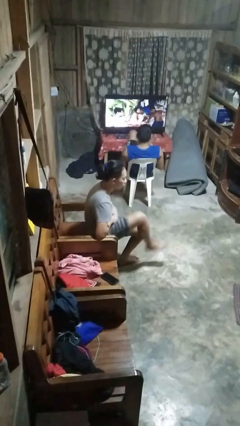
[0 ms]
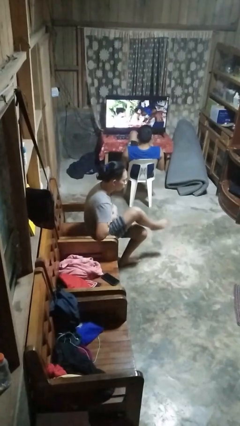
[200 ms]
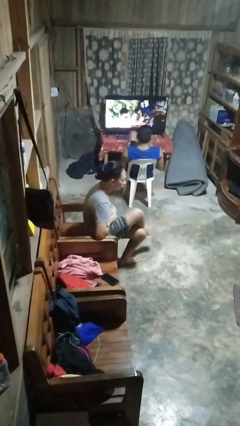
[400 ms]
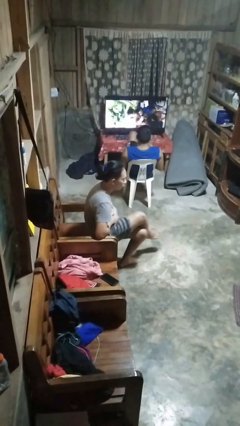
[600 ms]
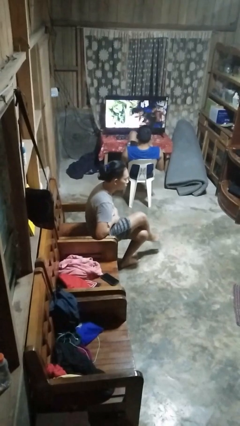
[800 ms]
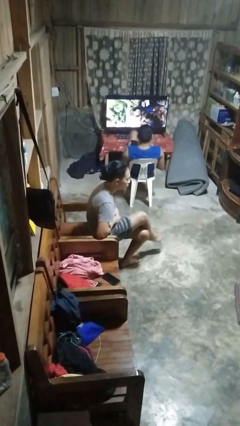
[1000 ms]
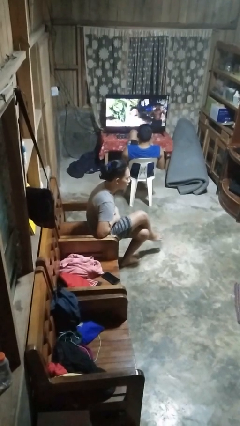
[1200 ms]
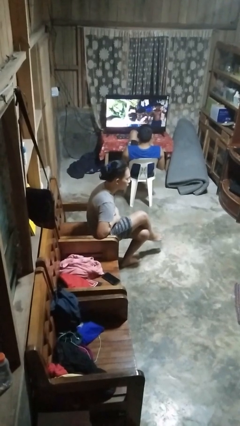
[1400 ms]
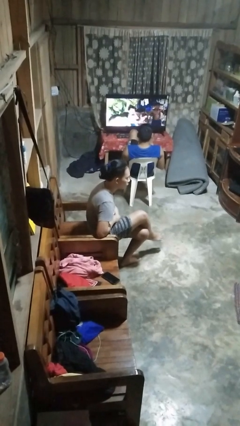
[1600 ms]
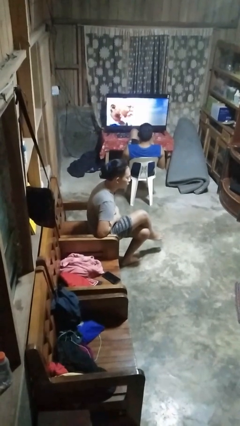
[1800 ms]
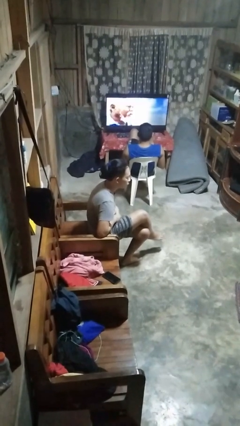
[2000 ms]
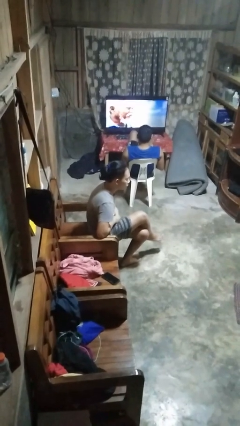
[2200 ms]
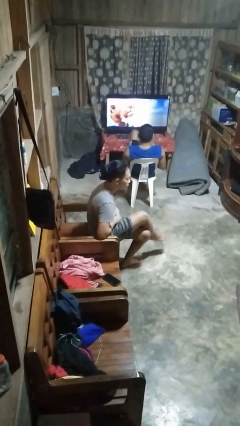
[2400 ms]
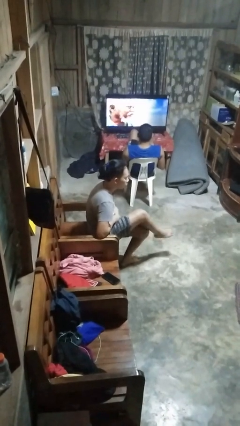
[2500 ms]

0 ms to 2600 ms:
person crosses legs

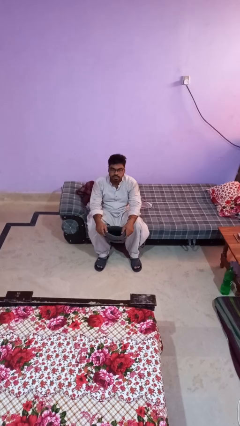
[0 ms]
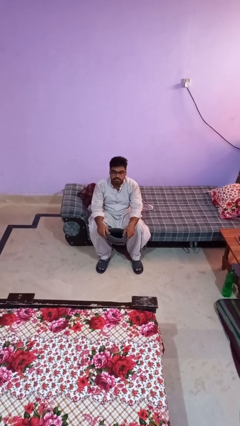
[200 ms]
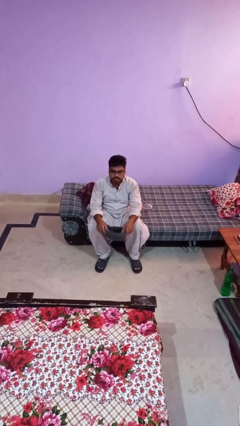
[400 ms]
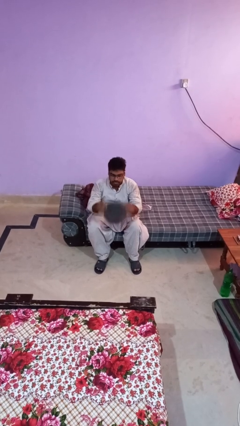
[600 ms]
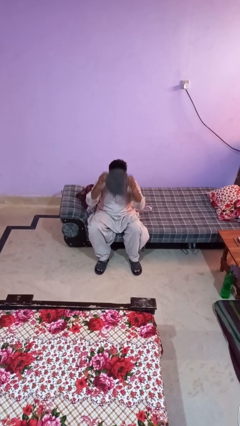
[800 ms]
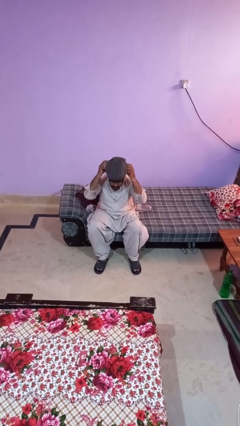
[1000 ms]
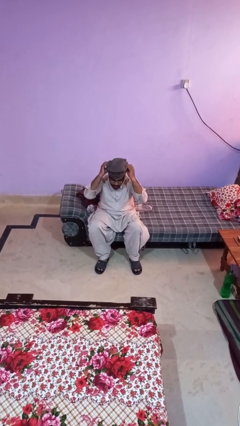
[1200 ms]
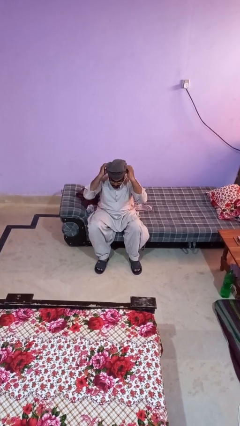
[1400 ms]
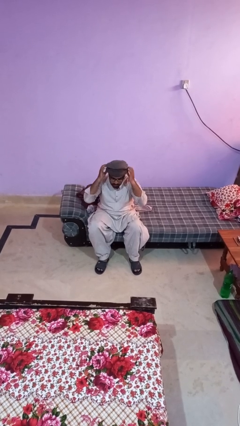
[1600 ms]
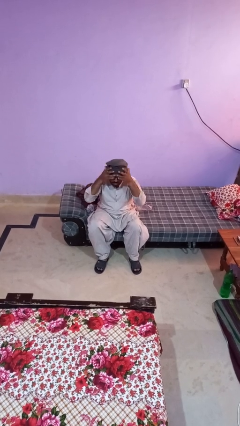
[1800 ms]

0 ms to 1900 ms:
person puts on hat

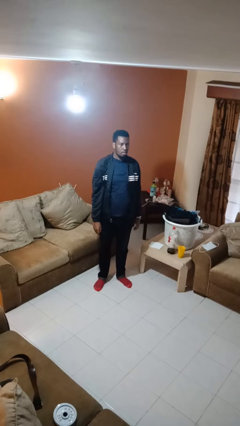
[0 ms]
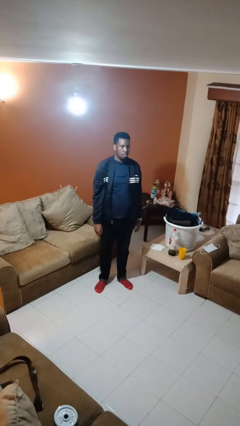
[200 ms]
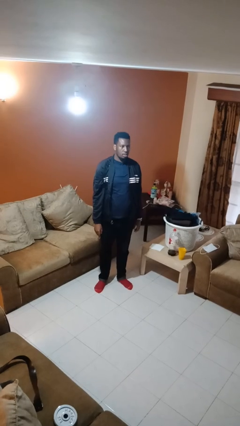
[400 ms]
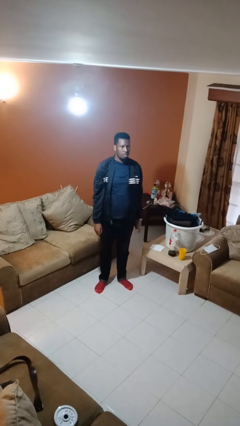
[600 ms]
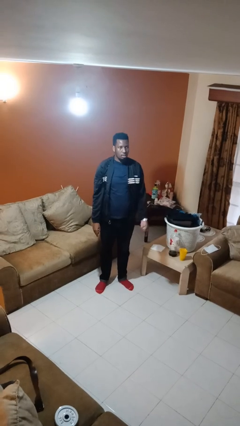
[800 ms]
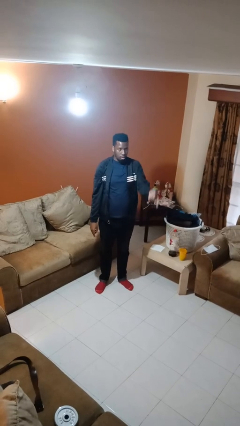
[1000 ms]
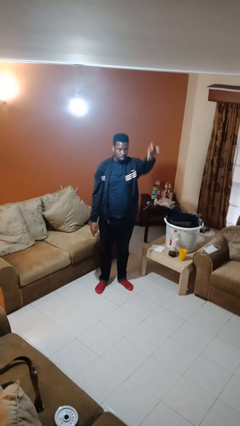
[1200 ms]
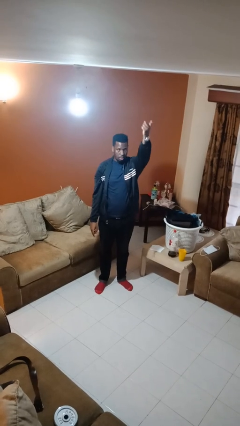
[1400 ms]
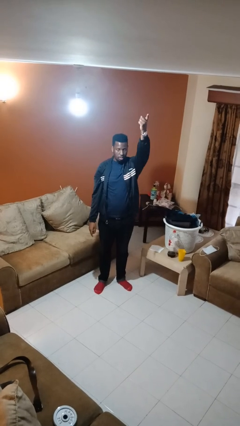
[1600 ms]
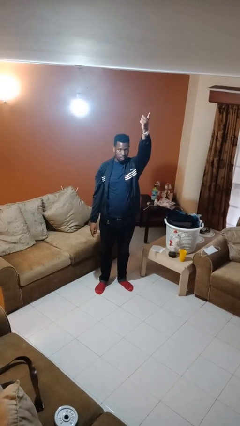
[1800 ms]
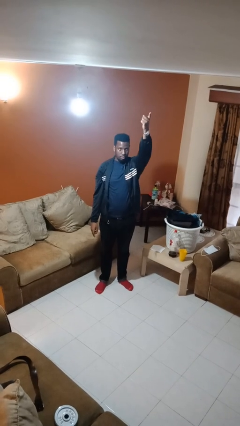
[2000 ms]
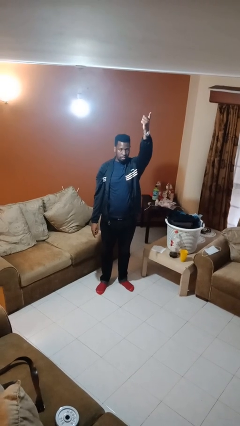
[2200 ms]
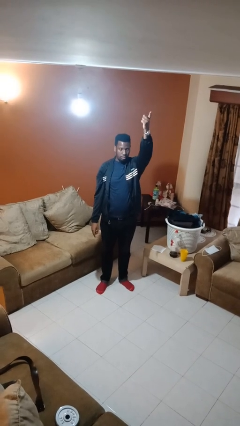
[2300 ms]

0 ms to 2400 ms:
person gestures swipe up

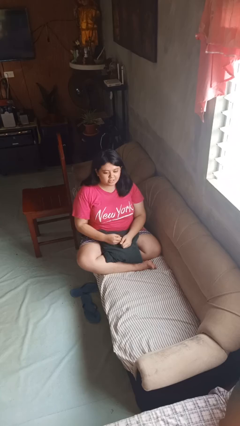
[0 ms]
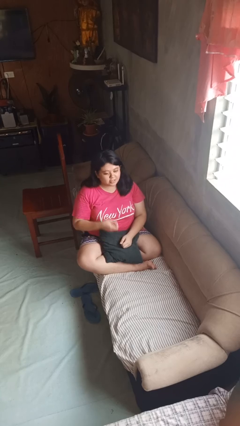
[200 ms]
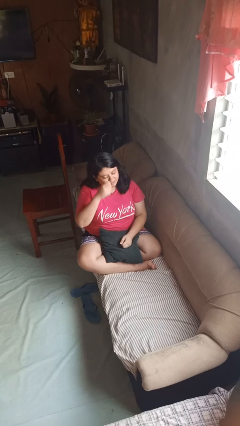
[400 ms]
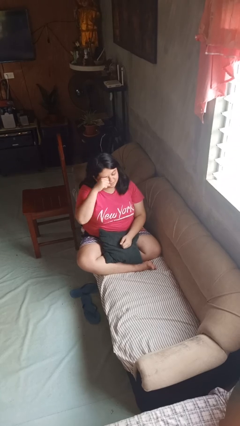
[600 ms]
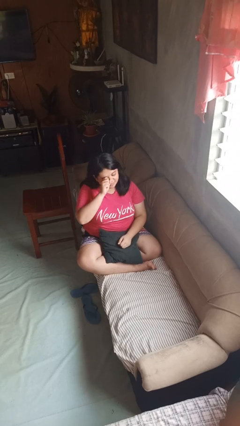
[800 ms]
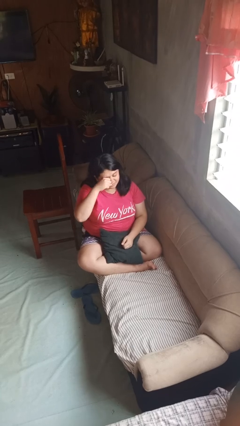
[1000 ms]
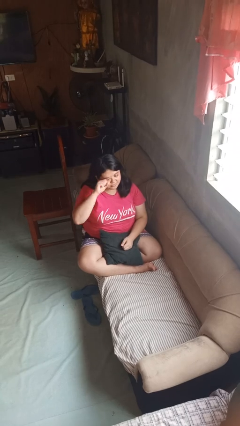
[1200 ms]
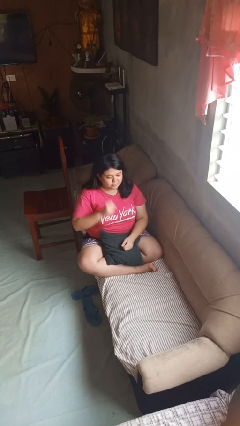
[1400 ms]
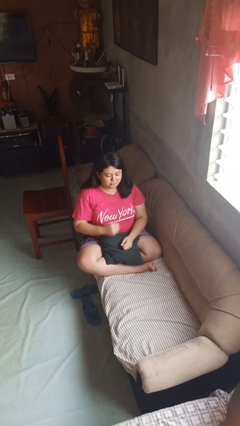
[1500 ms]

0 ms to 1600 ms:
person rubs eyes

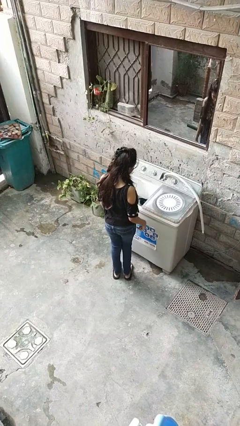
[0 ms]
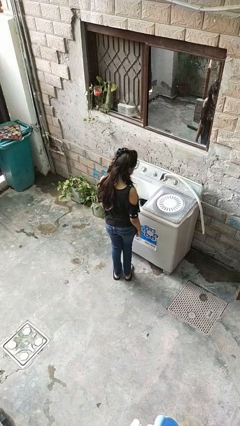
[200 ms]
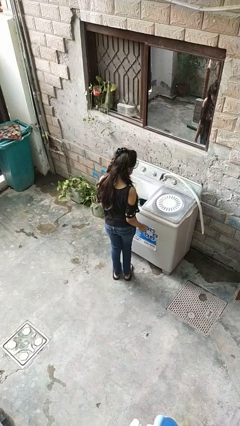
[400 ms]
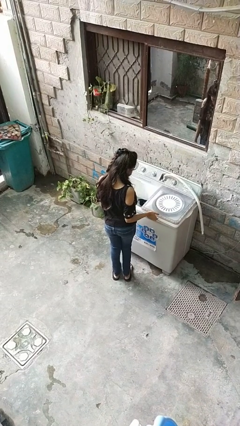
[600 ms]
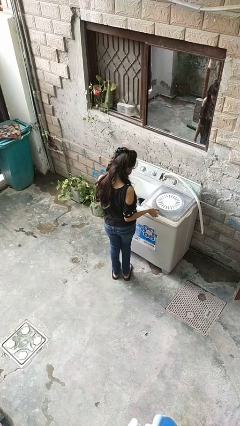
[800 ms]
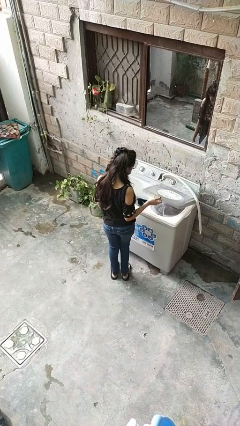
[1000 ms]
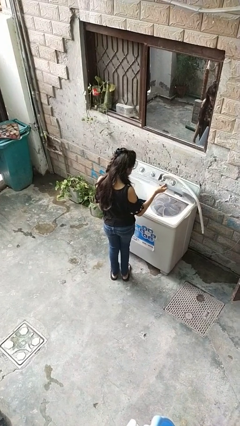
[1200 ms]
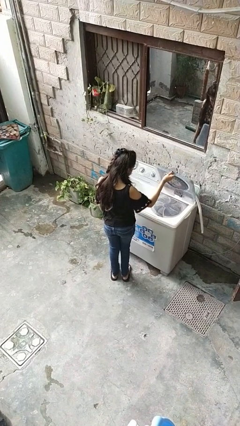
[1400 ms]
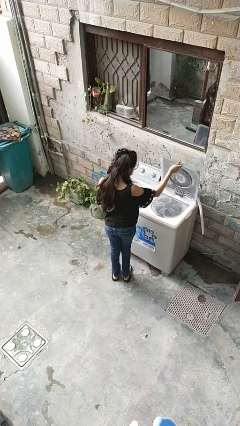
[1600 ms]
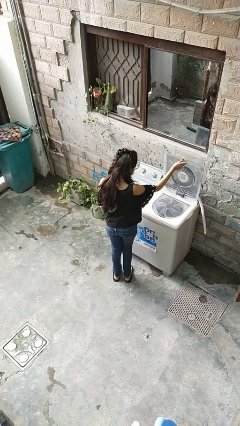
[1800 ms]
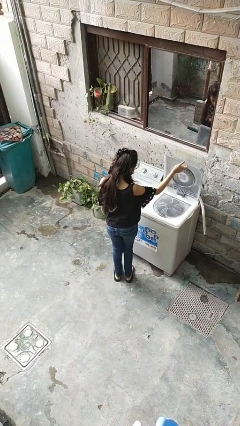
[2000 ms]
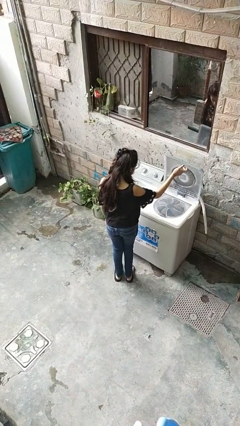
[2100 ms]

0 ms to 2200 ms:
person opens clothes washer

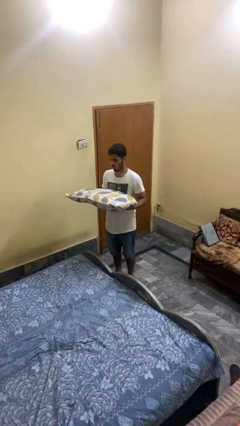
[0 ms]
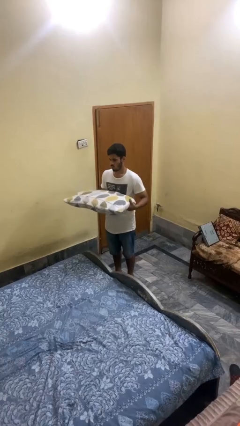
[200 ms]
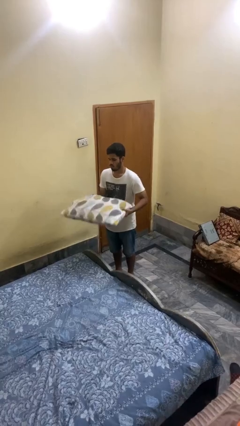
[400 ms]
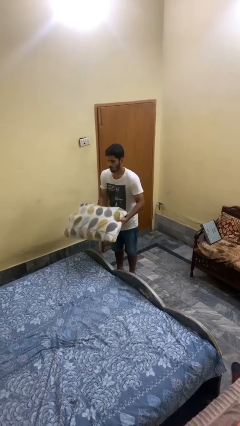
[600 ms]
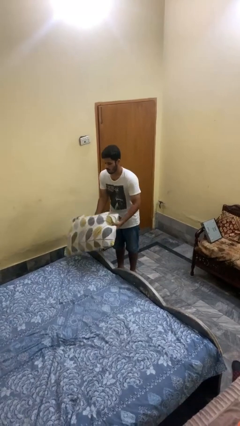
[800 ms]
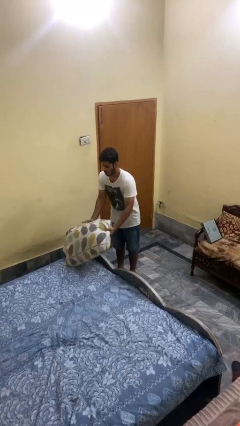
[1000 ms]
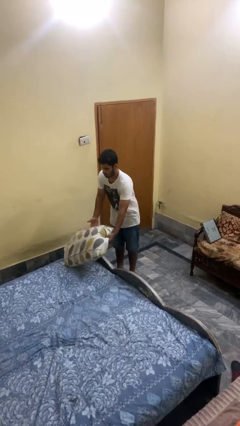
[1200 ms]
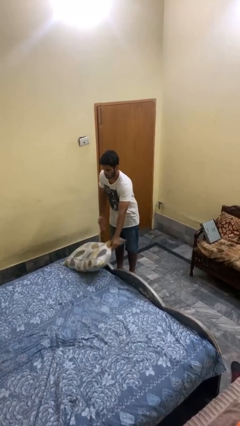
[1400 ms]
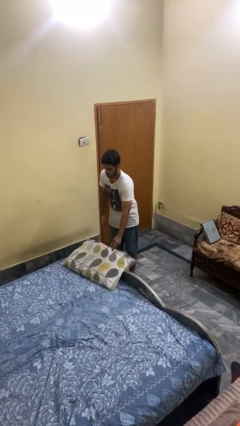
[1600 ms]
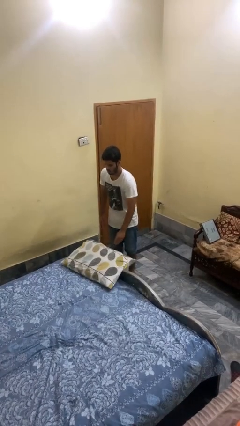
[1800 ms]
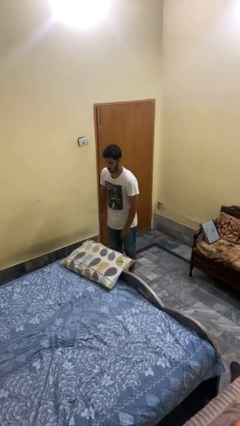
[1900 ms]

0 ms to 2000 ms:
person puts down object on bed

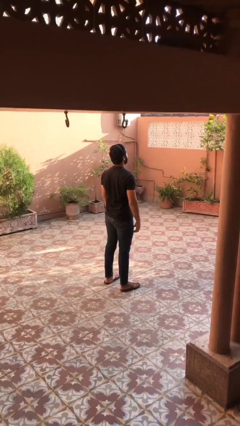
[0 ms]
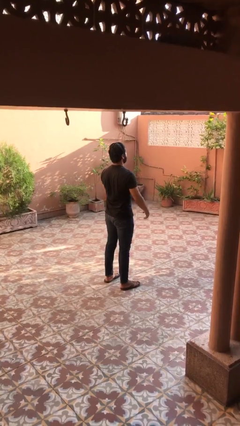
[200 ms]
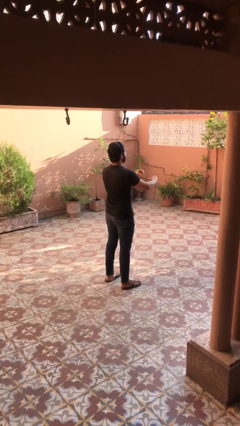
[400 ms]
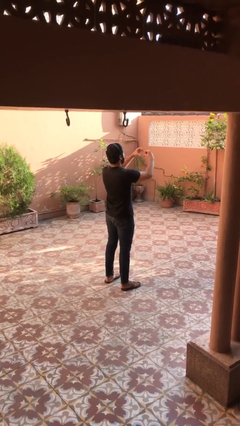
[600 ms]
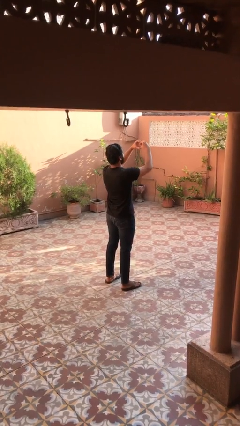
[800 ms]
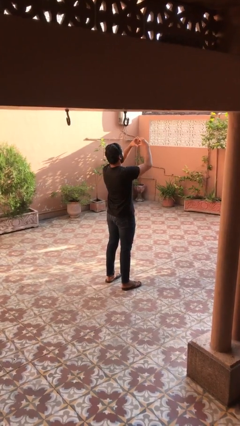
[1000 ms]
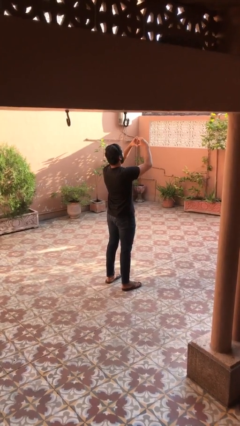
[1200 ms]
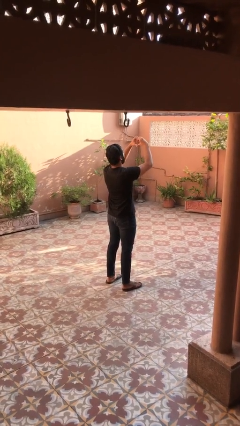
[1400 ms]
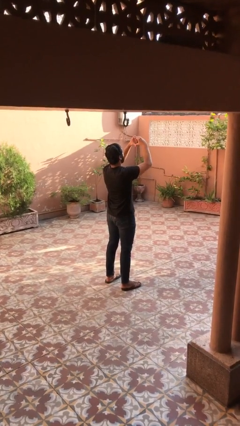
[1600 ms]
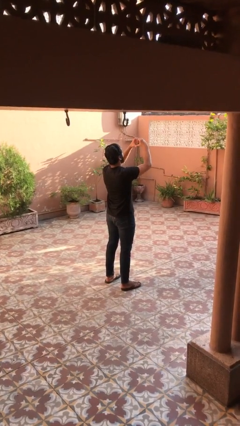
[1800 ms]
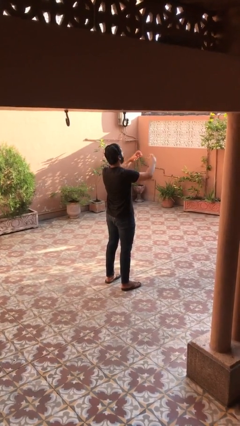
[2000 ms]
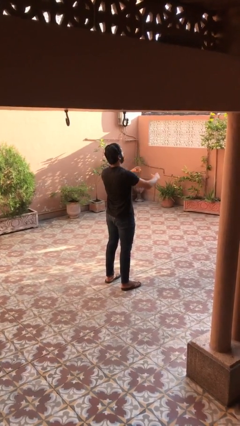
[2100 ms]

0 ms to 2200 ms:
person gestures heart

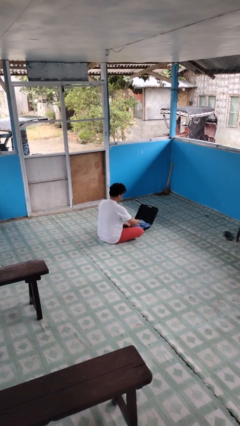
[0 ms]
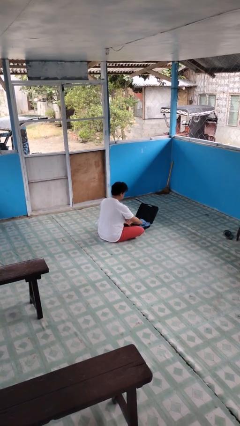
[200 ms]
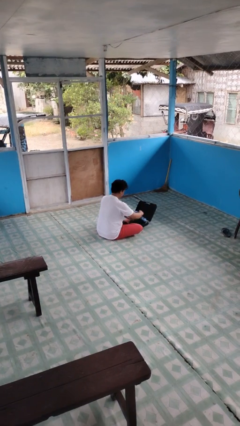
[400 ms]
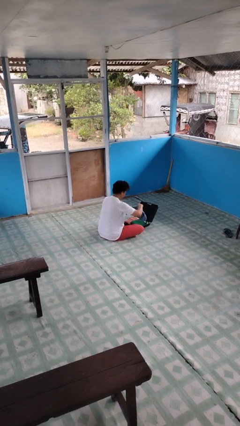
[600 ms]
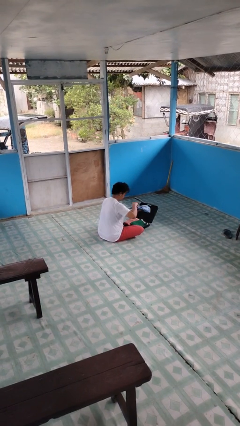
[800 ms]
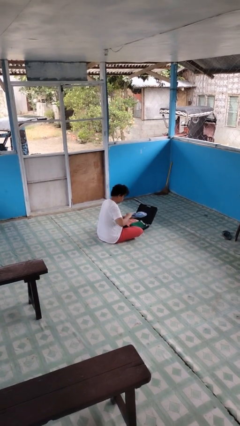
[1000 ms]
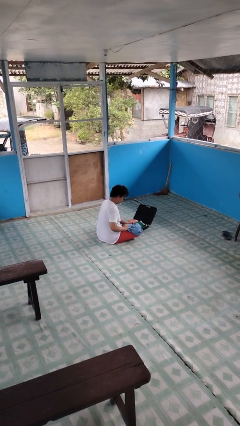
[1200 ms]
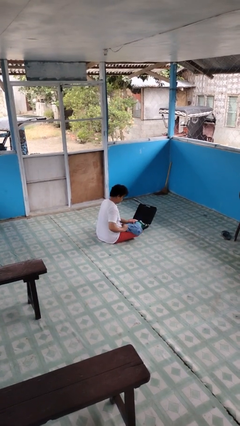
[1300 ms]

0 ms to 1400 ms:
person unloads clothes from suitcase

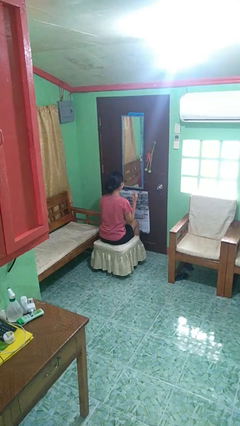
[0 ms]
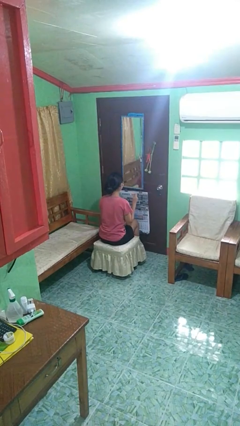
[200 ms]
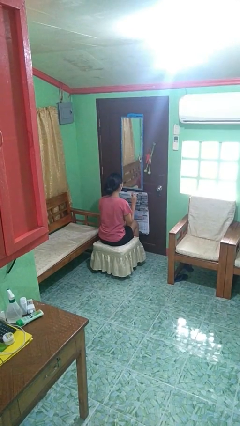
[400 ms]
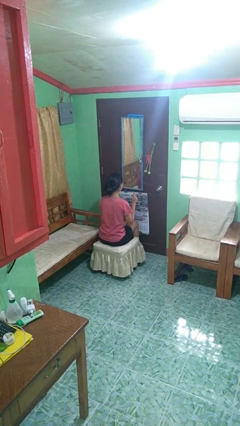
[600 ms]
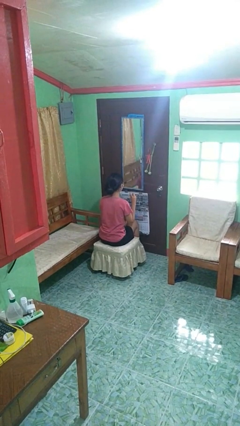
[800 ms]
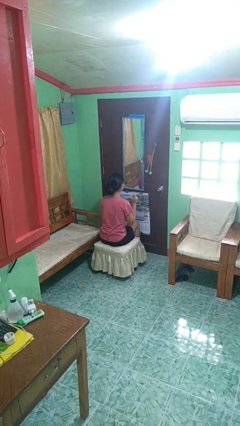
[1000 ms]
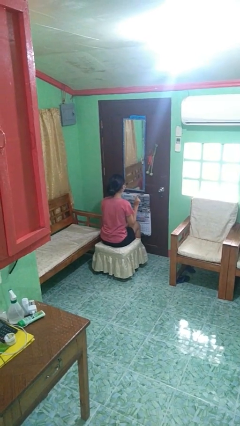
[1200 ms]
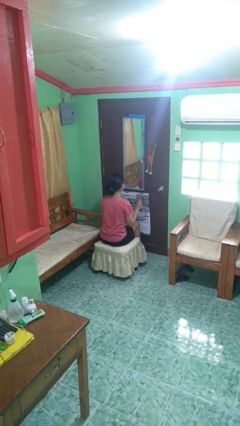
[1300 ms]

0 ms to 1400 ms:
person snaps fingers
